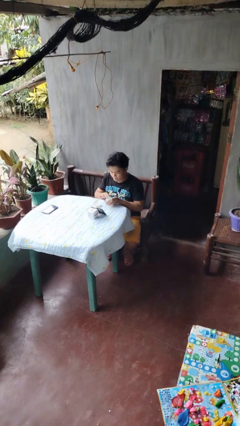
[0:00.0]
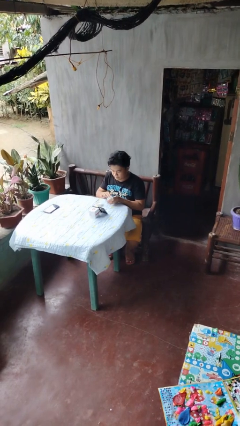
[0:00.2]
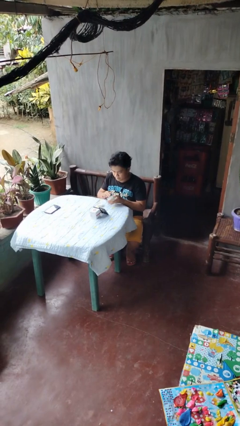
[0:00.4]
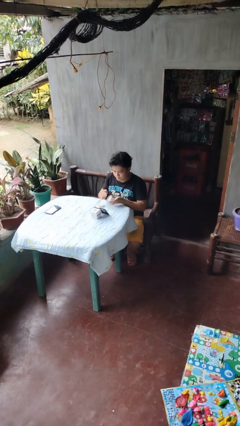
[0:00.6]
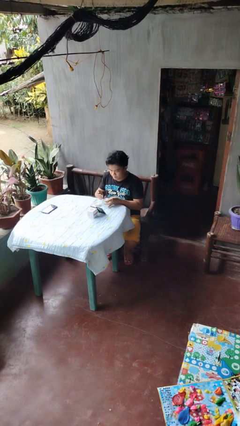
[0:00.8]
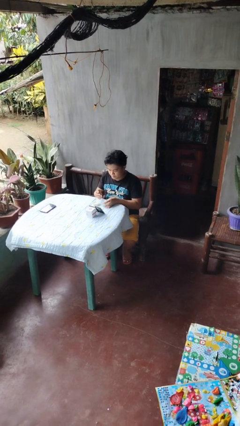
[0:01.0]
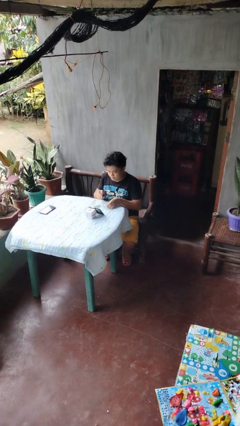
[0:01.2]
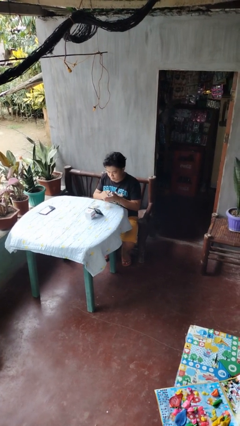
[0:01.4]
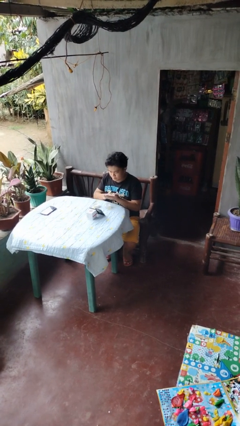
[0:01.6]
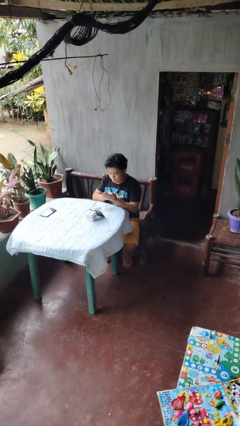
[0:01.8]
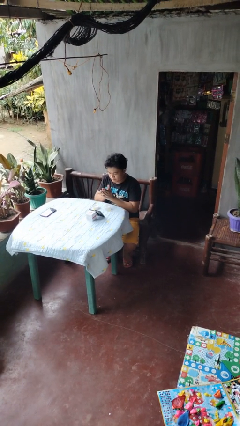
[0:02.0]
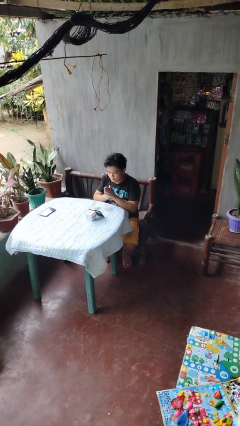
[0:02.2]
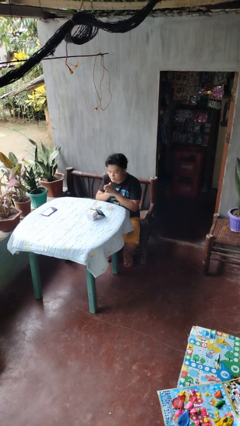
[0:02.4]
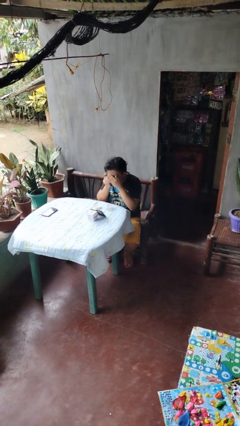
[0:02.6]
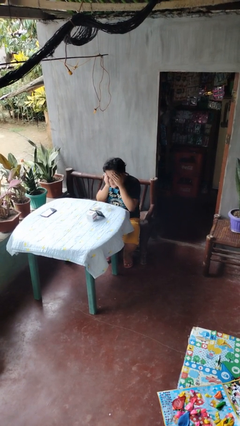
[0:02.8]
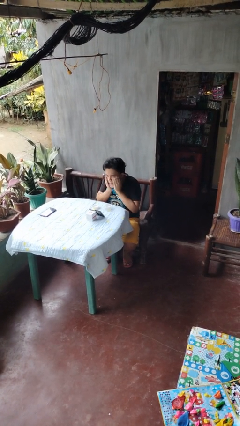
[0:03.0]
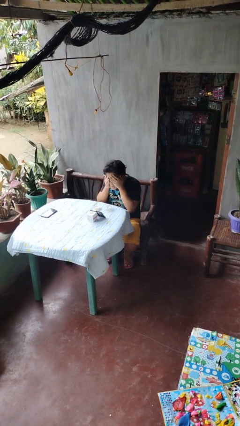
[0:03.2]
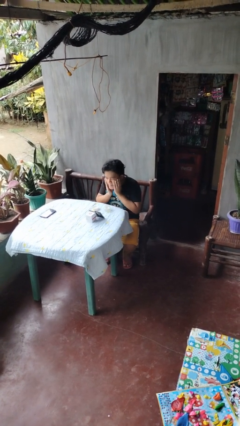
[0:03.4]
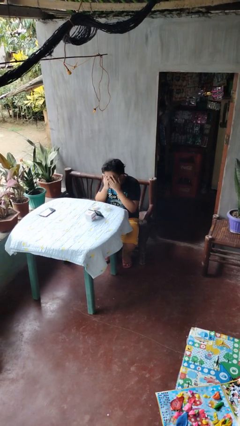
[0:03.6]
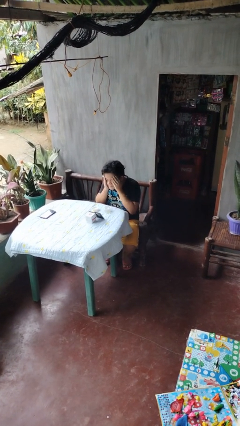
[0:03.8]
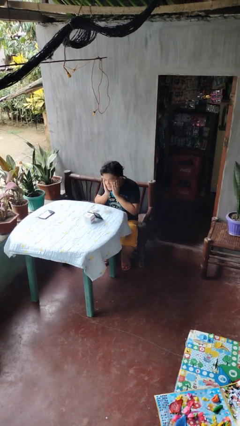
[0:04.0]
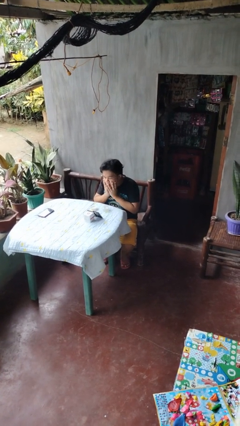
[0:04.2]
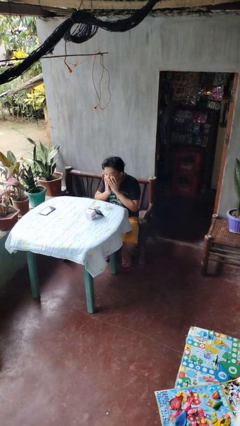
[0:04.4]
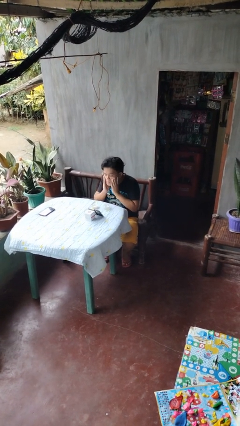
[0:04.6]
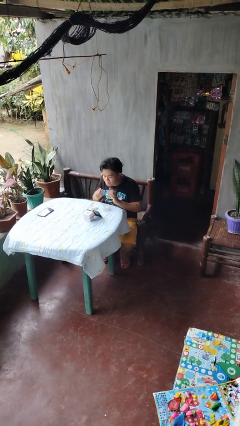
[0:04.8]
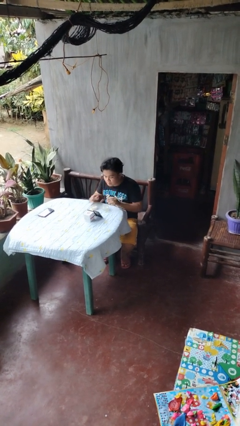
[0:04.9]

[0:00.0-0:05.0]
person applies facial moisturizer

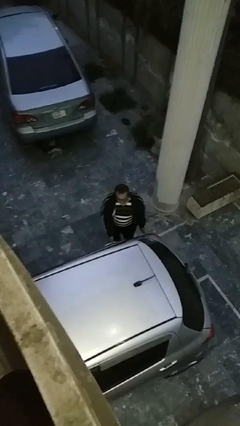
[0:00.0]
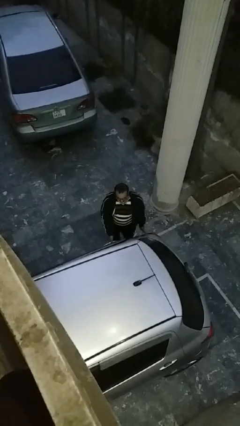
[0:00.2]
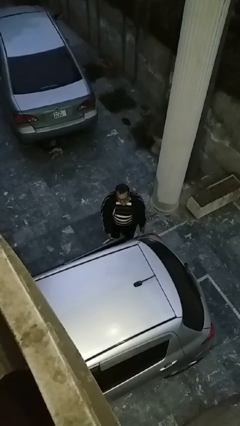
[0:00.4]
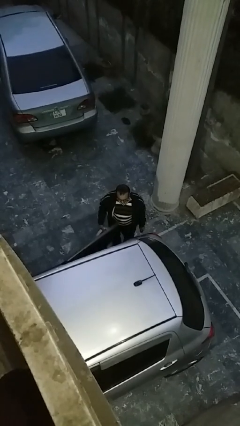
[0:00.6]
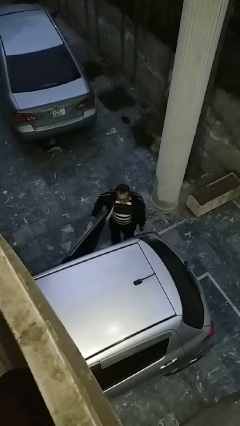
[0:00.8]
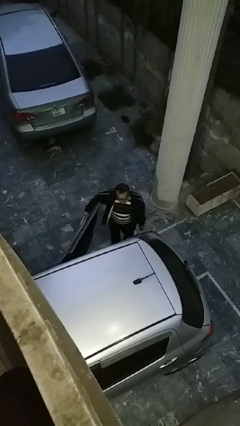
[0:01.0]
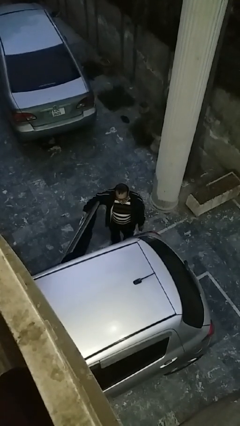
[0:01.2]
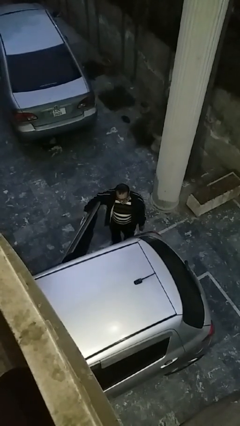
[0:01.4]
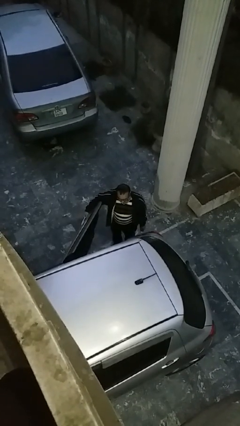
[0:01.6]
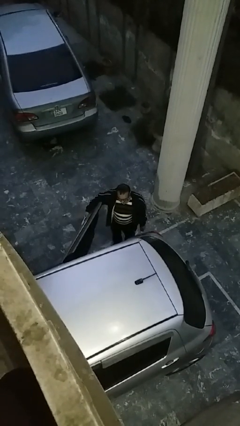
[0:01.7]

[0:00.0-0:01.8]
person opens car door

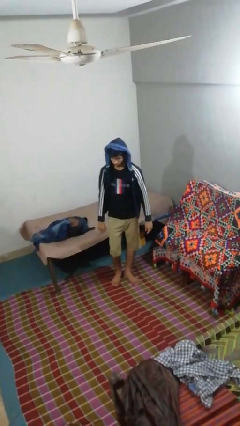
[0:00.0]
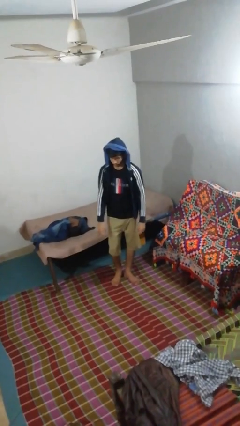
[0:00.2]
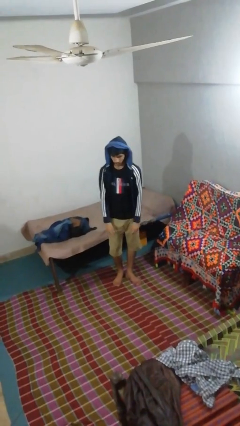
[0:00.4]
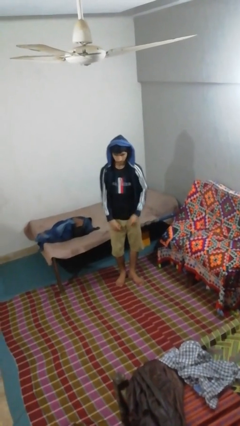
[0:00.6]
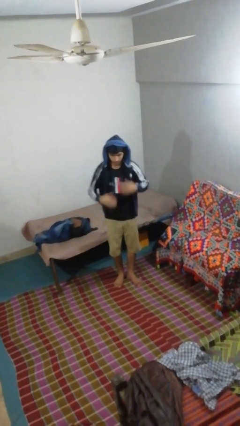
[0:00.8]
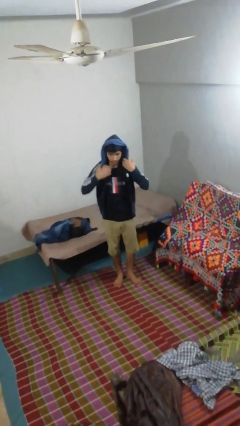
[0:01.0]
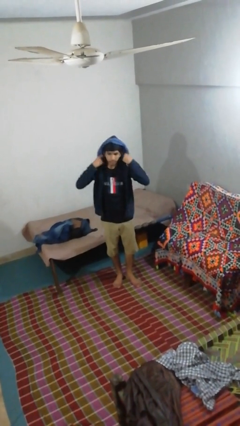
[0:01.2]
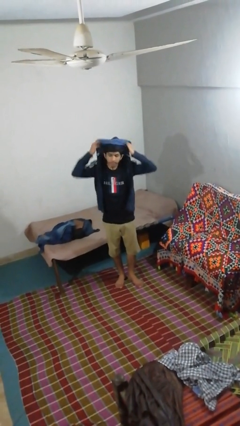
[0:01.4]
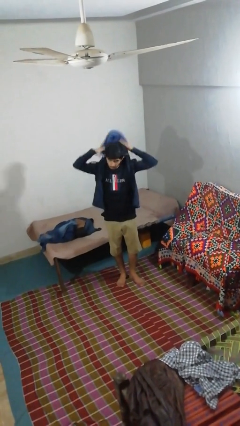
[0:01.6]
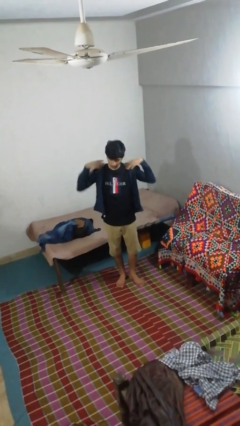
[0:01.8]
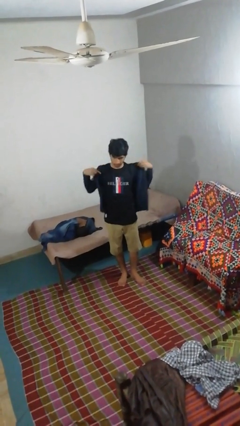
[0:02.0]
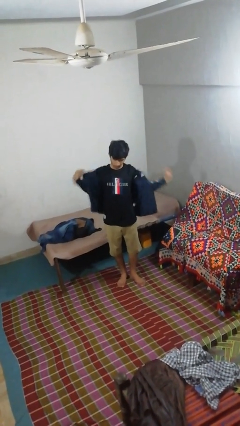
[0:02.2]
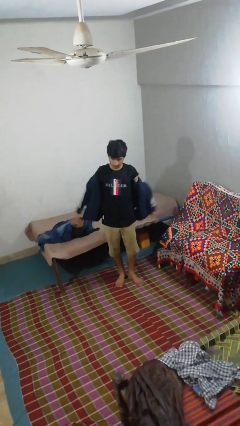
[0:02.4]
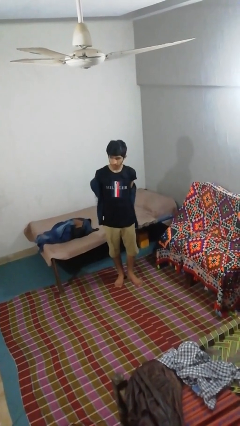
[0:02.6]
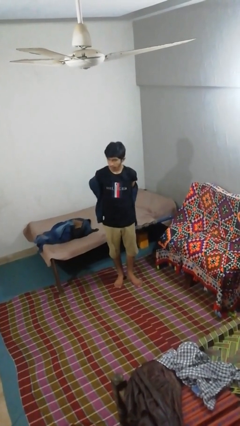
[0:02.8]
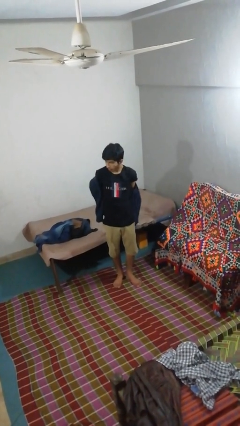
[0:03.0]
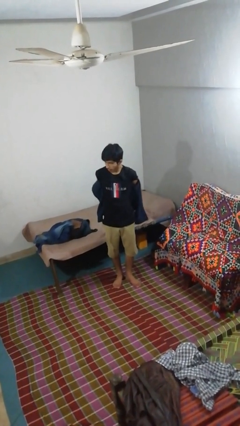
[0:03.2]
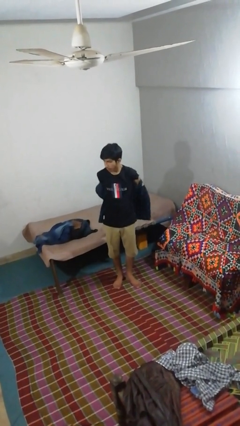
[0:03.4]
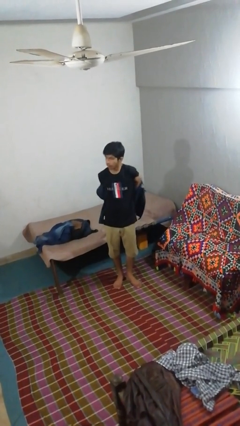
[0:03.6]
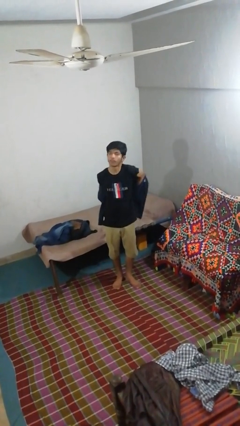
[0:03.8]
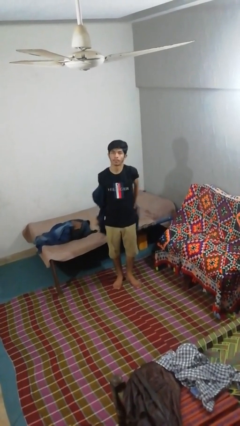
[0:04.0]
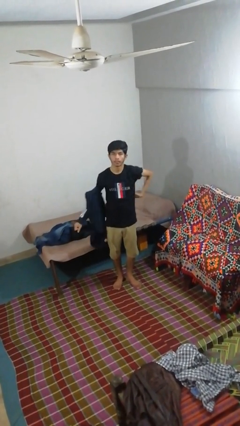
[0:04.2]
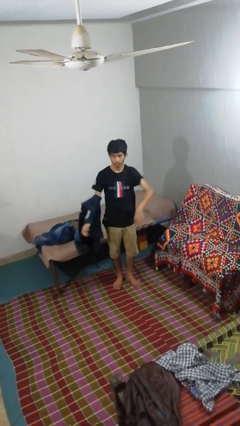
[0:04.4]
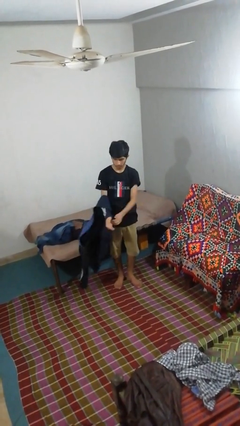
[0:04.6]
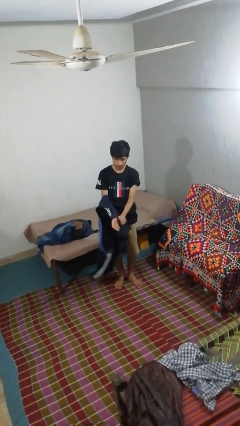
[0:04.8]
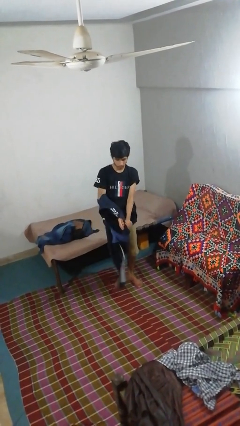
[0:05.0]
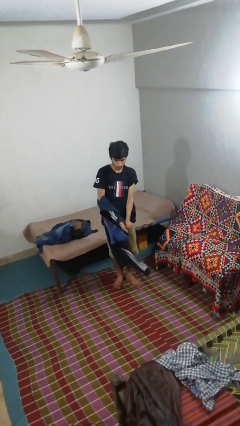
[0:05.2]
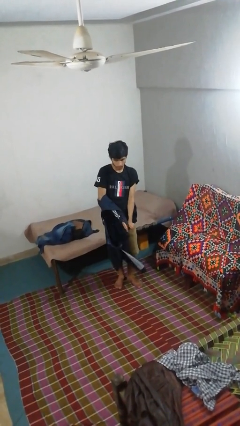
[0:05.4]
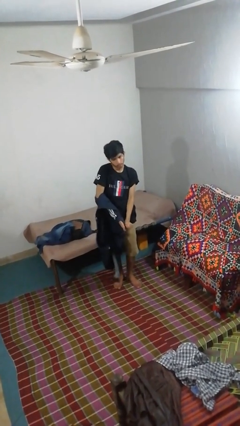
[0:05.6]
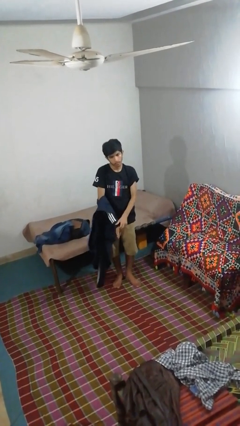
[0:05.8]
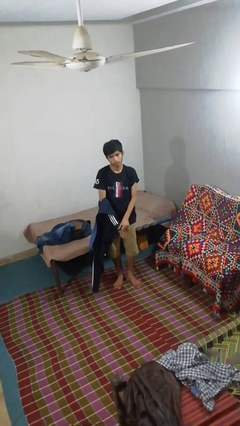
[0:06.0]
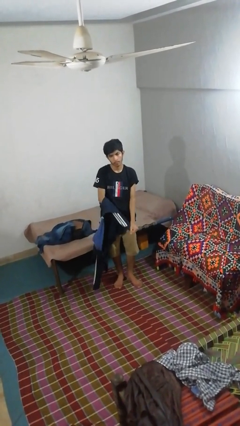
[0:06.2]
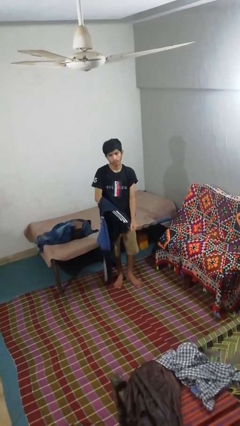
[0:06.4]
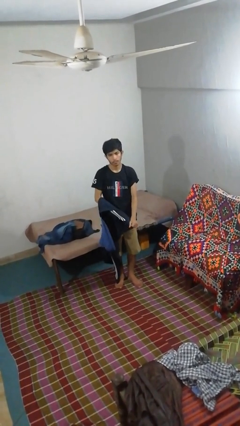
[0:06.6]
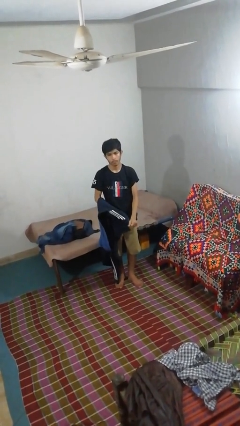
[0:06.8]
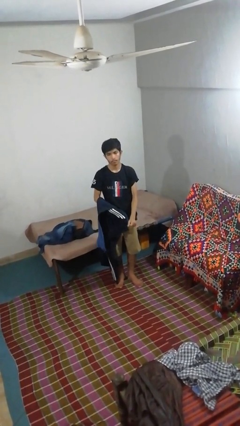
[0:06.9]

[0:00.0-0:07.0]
person takes off hoodie

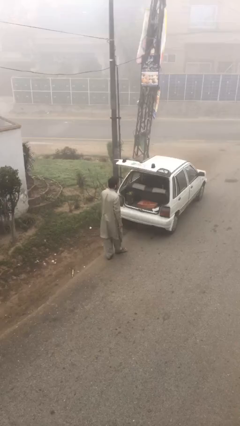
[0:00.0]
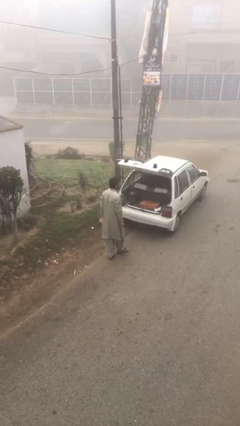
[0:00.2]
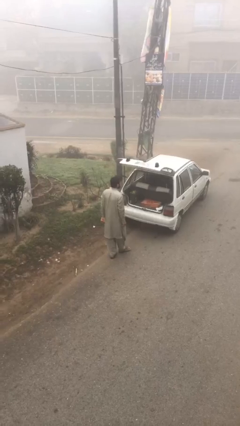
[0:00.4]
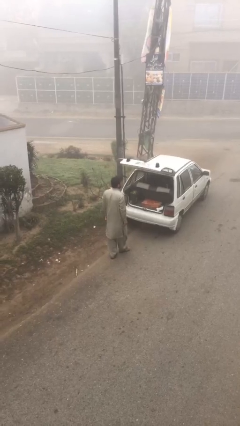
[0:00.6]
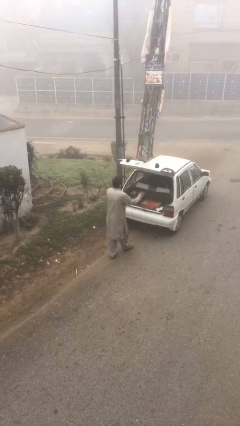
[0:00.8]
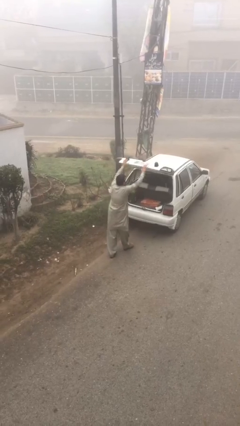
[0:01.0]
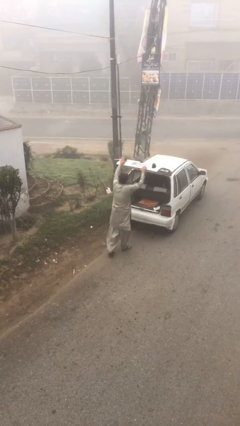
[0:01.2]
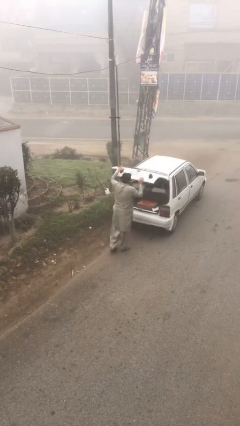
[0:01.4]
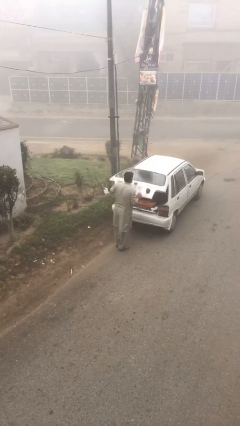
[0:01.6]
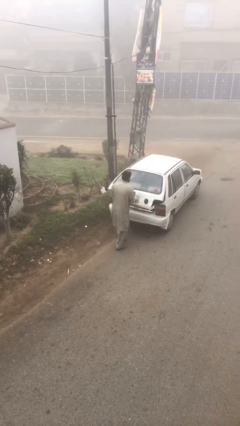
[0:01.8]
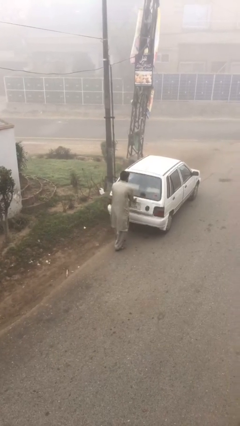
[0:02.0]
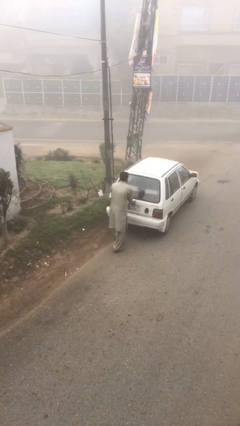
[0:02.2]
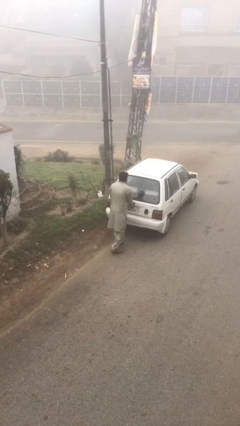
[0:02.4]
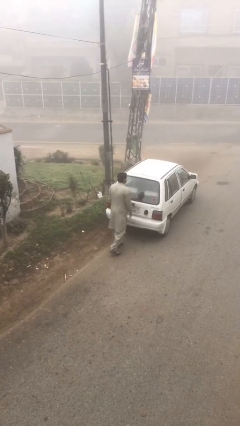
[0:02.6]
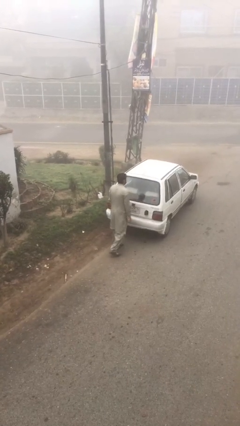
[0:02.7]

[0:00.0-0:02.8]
person closes car trunk

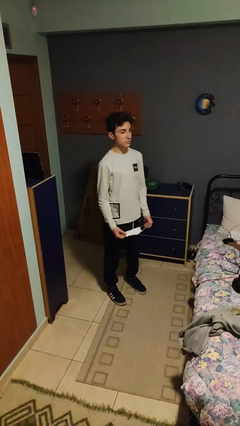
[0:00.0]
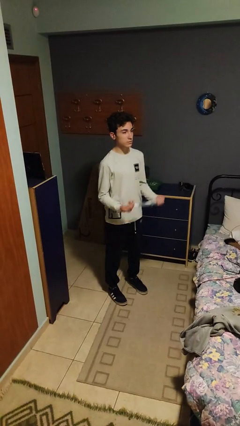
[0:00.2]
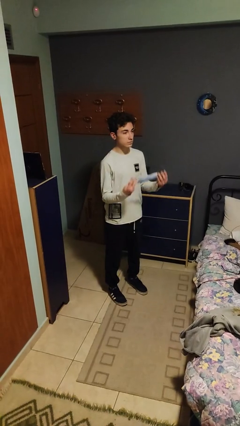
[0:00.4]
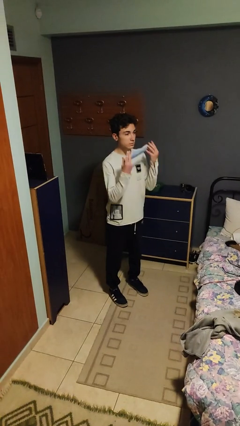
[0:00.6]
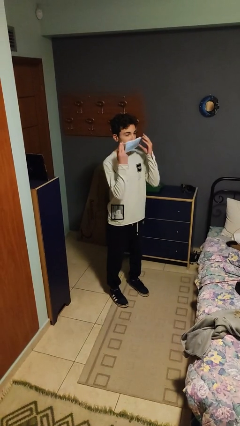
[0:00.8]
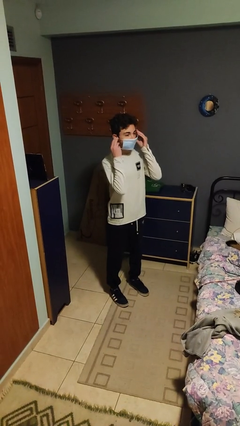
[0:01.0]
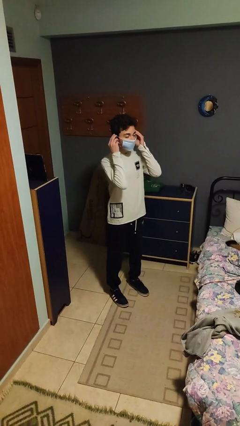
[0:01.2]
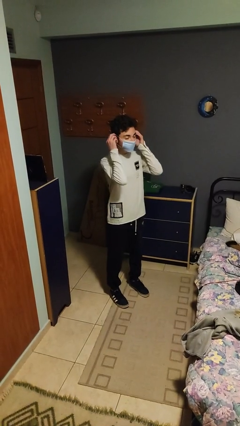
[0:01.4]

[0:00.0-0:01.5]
person puts on facemask
